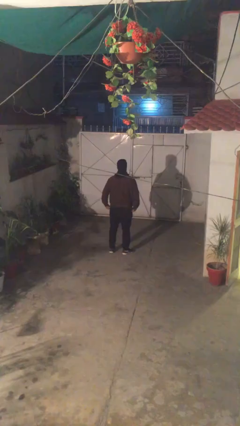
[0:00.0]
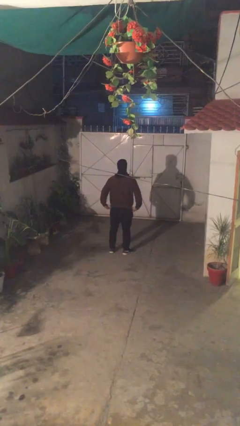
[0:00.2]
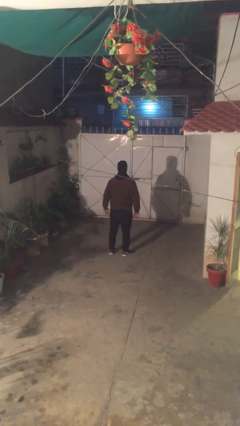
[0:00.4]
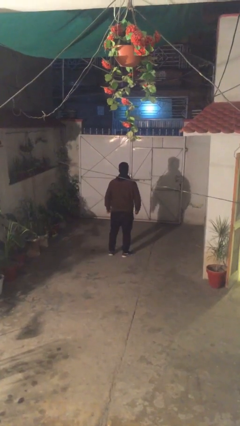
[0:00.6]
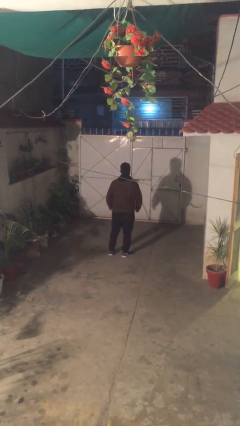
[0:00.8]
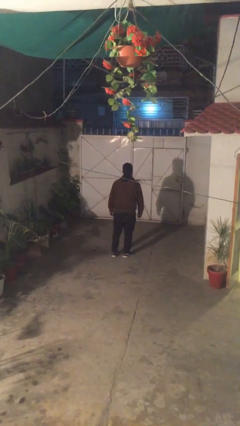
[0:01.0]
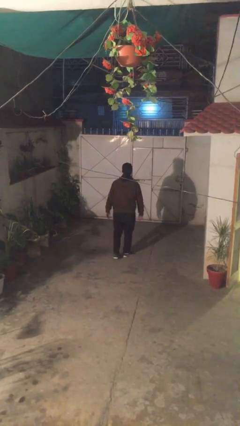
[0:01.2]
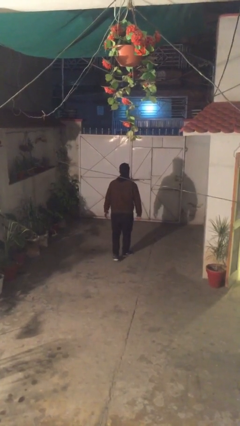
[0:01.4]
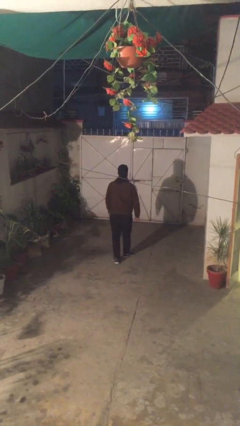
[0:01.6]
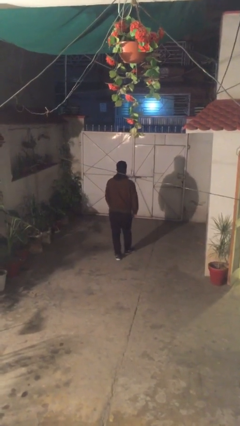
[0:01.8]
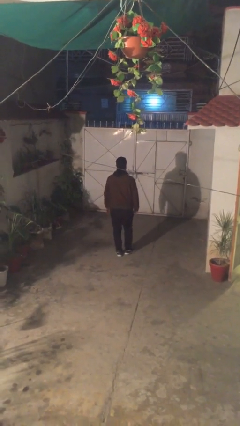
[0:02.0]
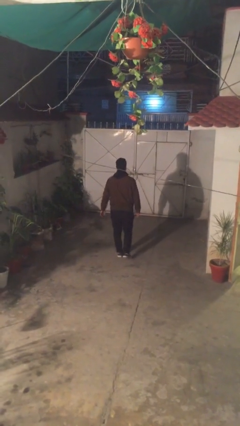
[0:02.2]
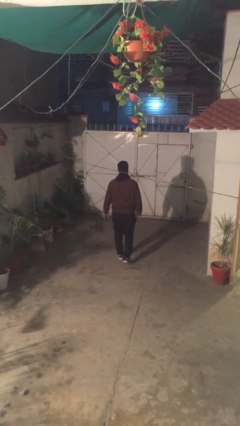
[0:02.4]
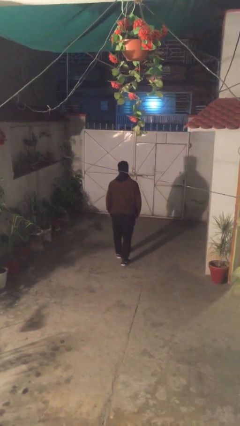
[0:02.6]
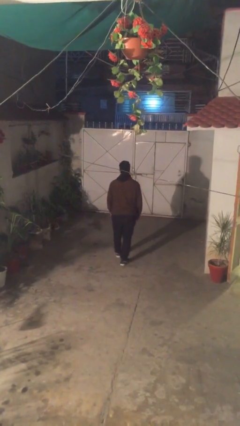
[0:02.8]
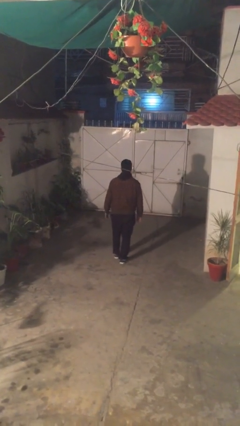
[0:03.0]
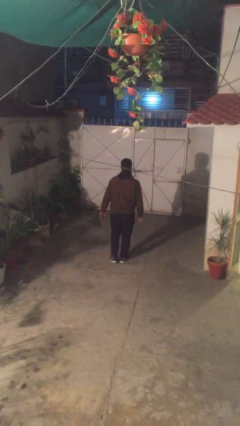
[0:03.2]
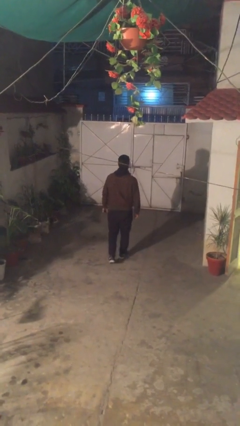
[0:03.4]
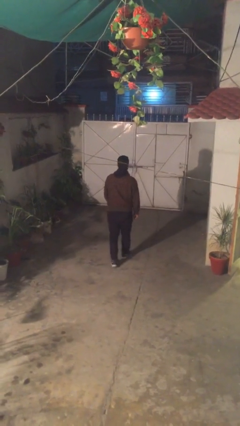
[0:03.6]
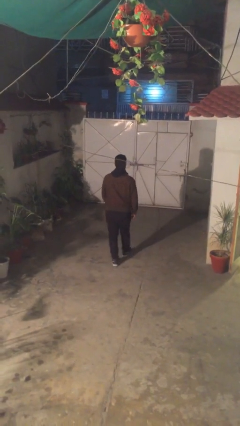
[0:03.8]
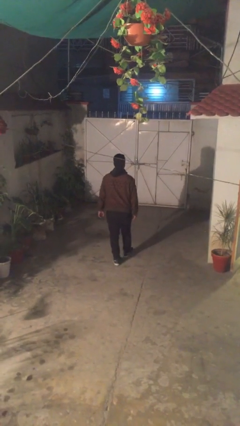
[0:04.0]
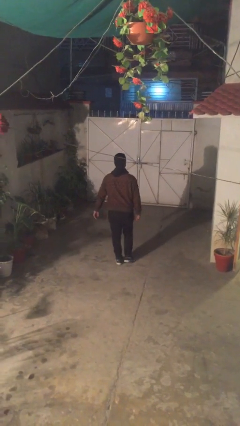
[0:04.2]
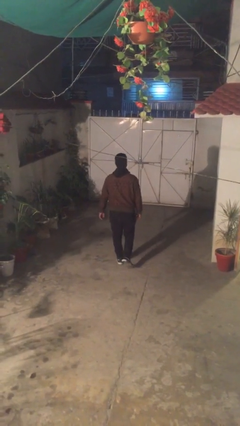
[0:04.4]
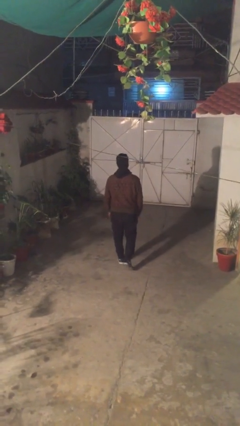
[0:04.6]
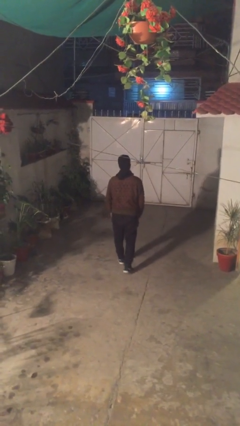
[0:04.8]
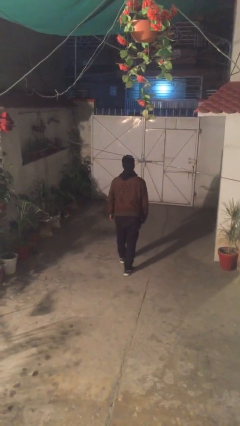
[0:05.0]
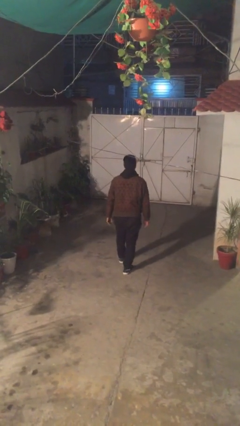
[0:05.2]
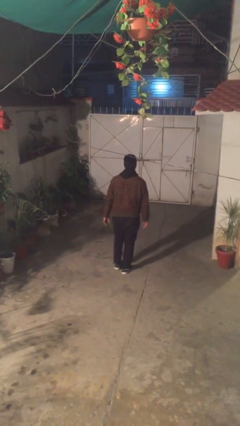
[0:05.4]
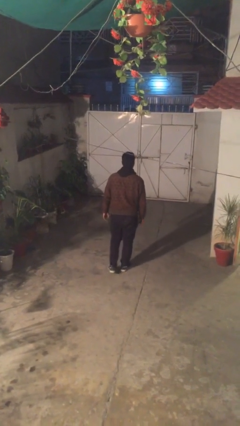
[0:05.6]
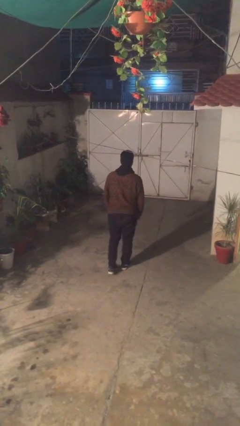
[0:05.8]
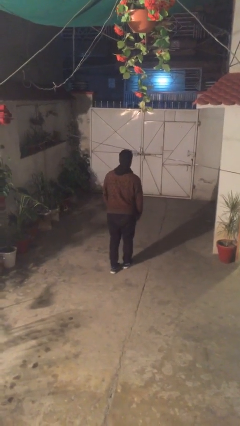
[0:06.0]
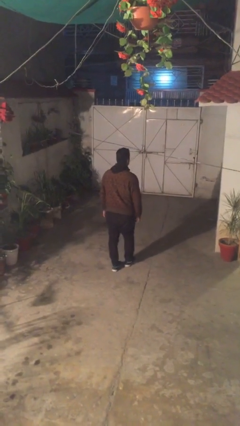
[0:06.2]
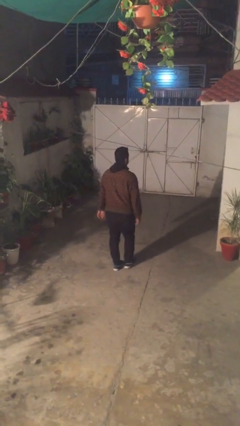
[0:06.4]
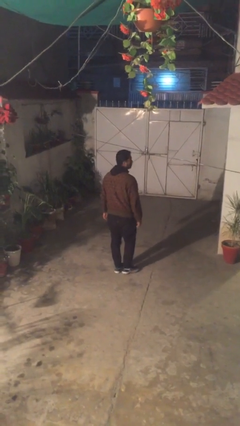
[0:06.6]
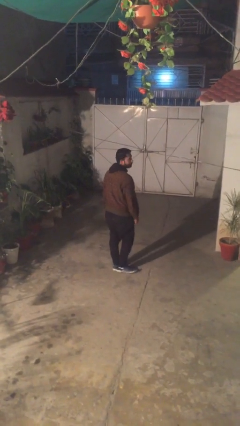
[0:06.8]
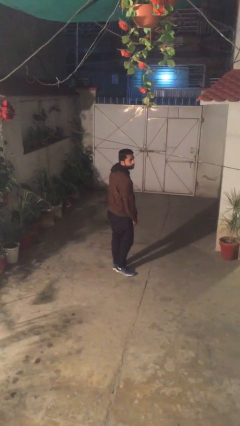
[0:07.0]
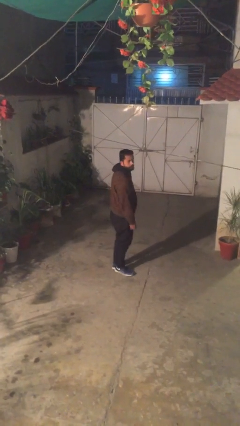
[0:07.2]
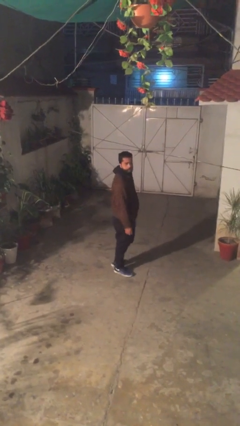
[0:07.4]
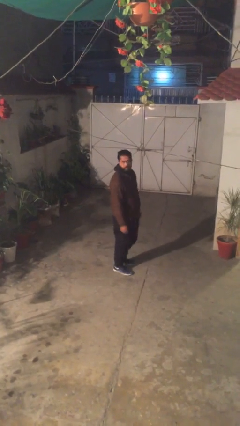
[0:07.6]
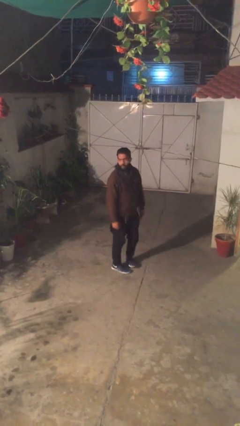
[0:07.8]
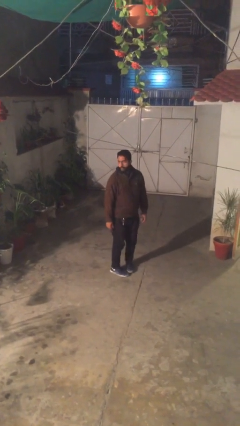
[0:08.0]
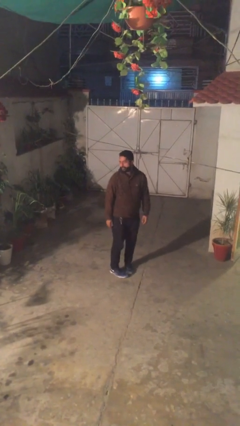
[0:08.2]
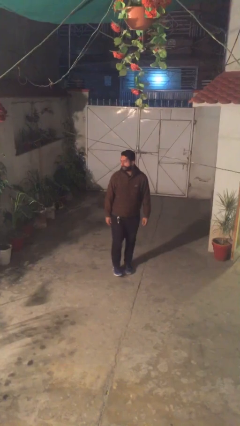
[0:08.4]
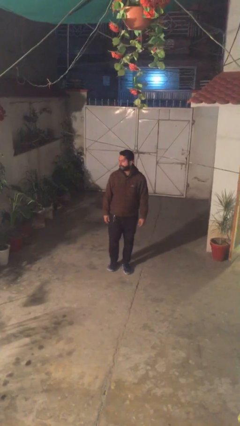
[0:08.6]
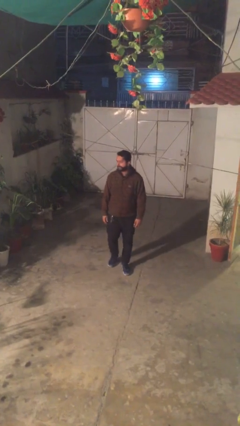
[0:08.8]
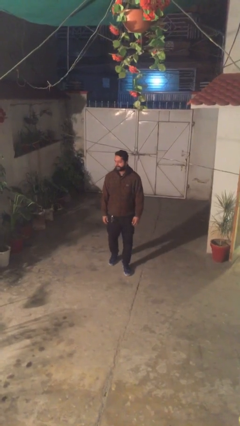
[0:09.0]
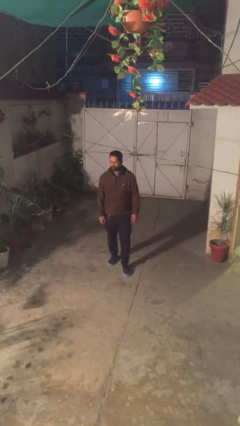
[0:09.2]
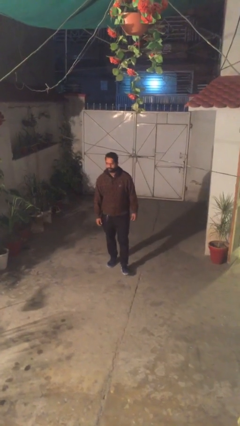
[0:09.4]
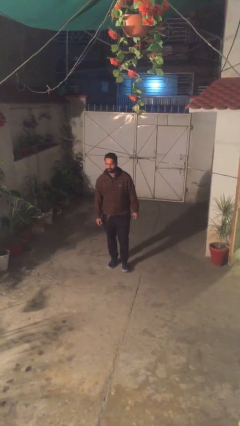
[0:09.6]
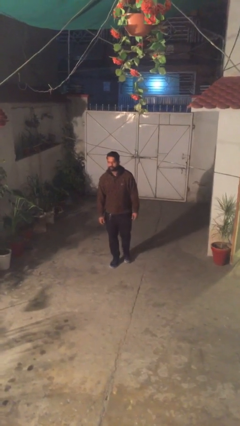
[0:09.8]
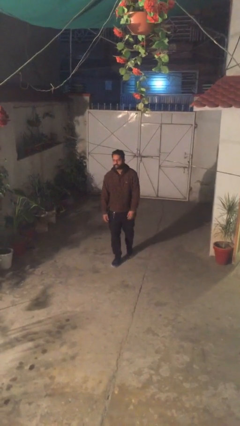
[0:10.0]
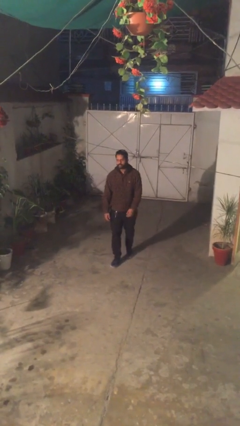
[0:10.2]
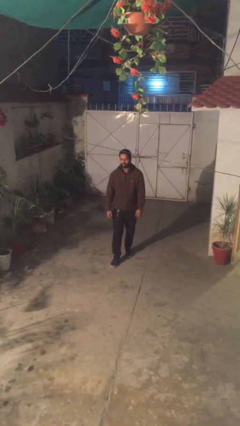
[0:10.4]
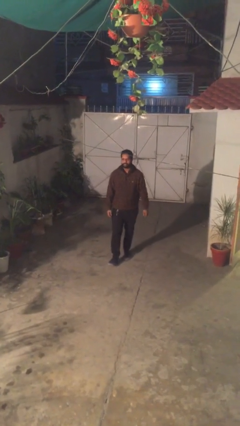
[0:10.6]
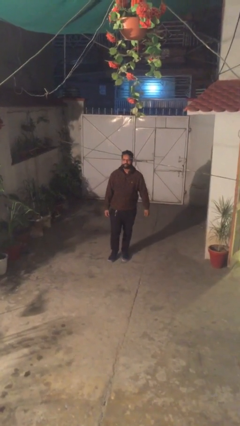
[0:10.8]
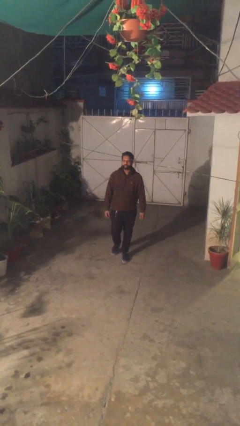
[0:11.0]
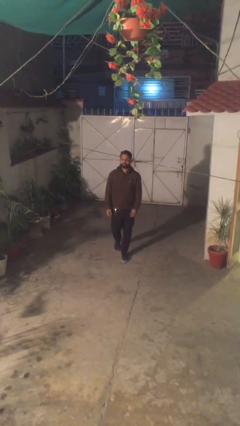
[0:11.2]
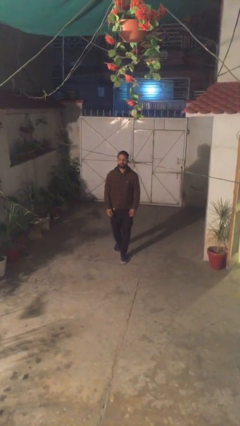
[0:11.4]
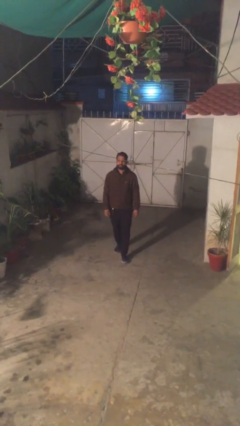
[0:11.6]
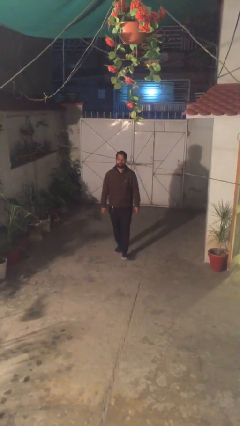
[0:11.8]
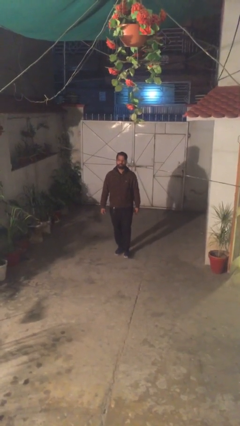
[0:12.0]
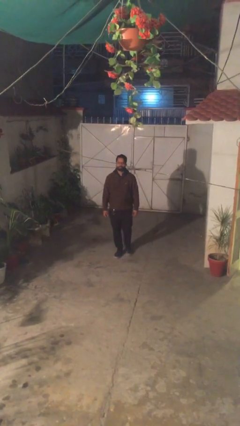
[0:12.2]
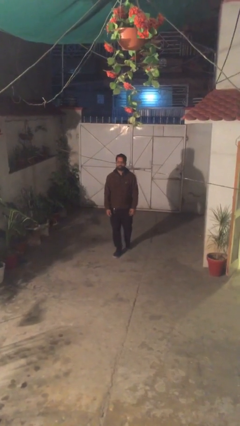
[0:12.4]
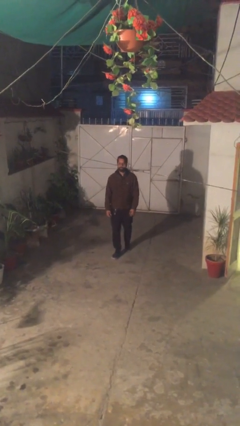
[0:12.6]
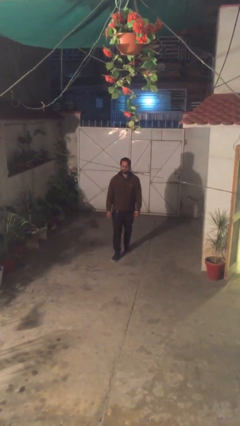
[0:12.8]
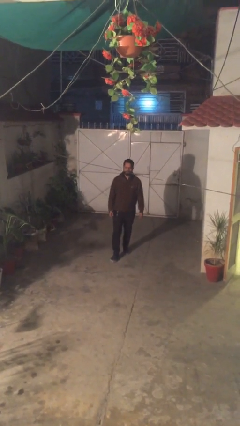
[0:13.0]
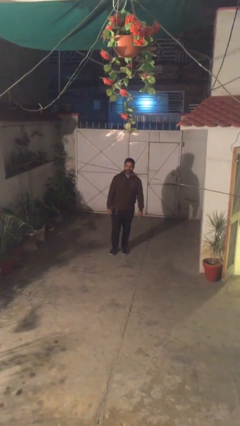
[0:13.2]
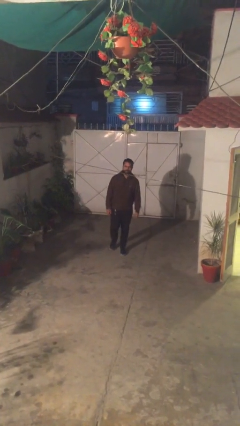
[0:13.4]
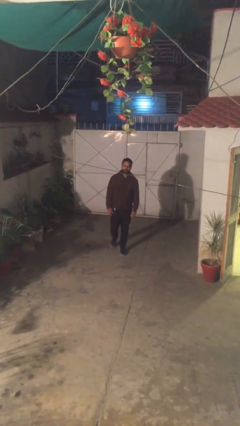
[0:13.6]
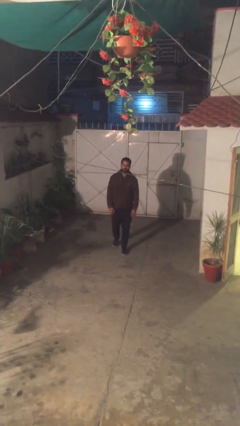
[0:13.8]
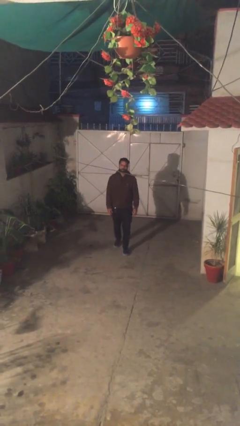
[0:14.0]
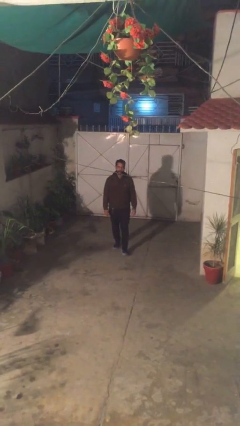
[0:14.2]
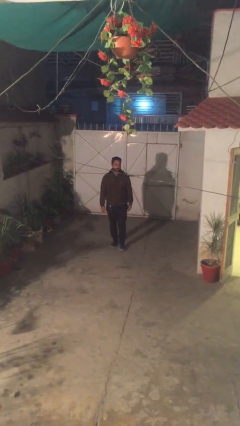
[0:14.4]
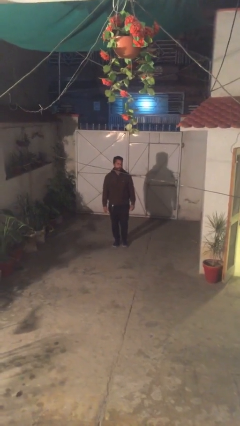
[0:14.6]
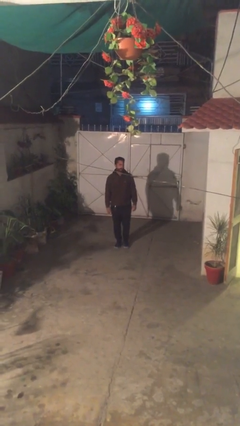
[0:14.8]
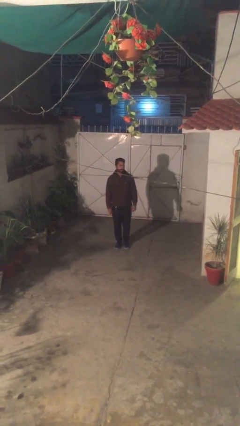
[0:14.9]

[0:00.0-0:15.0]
person walks

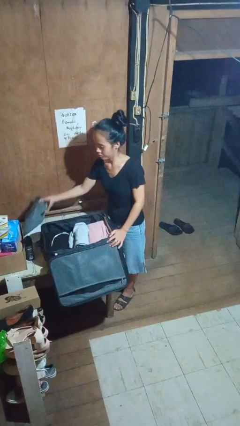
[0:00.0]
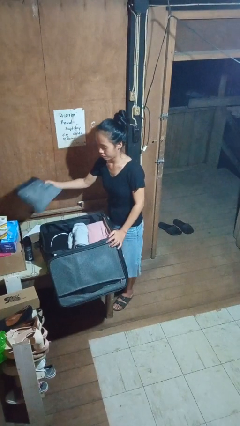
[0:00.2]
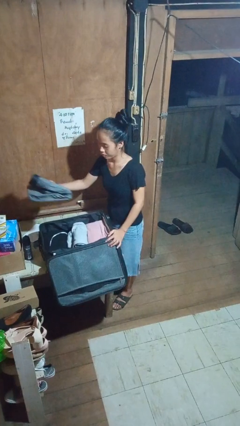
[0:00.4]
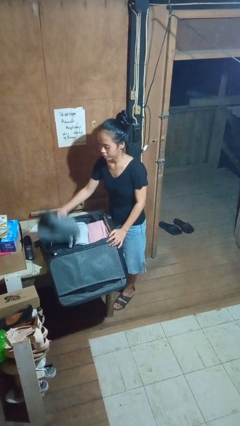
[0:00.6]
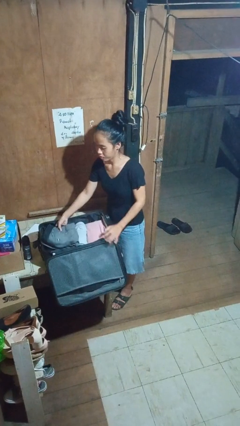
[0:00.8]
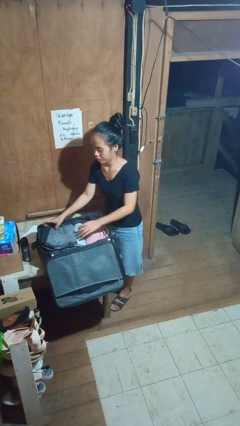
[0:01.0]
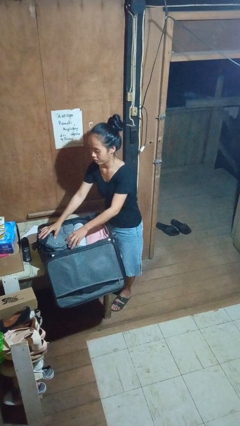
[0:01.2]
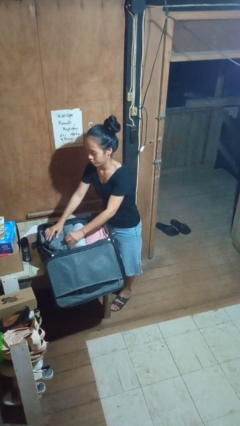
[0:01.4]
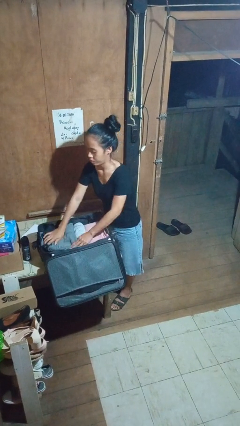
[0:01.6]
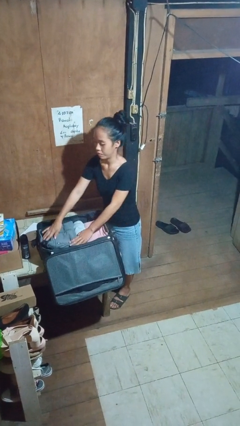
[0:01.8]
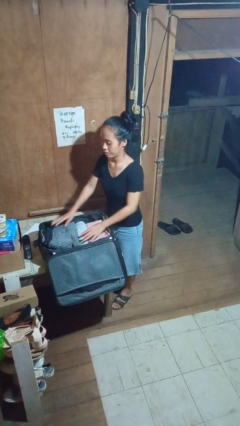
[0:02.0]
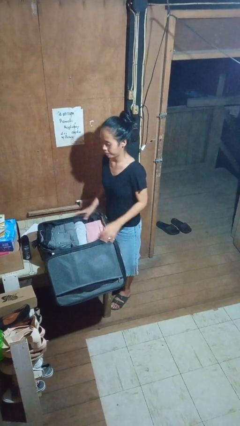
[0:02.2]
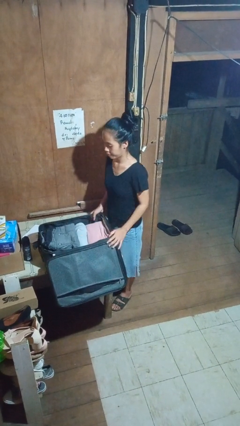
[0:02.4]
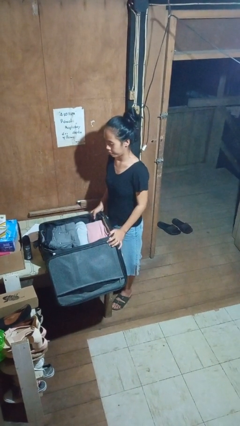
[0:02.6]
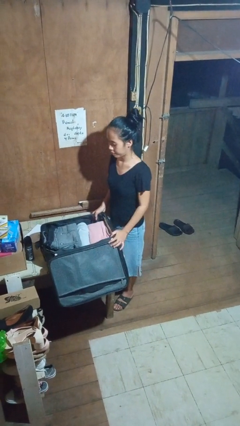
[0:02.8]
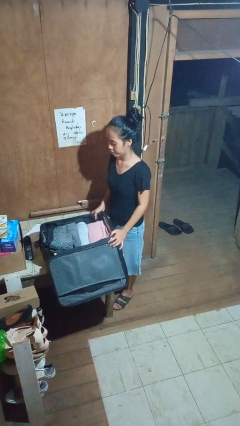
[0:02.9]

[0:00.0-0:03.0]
person loads clothes into suitcase
